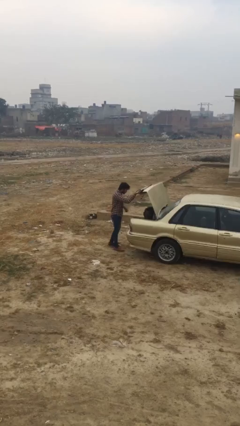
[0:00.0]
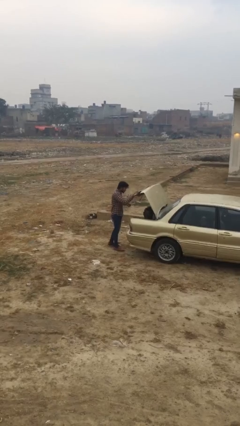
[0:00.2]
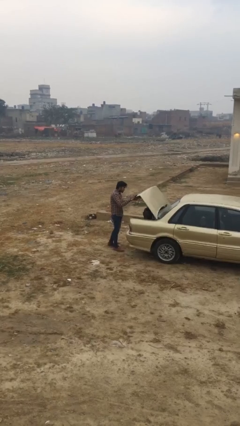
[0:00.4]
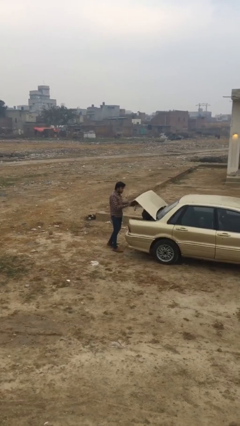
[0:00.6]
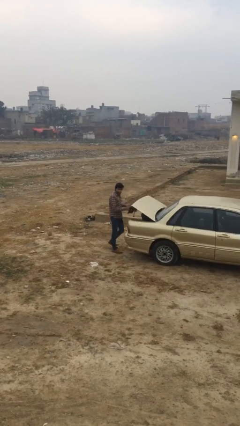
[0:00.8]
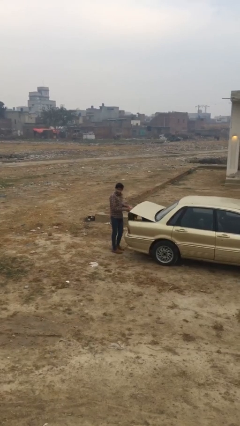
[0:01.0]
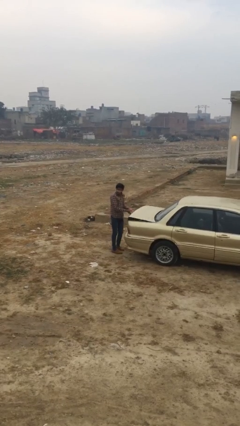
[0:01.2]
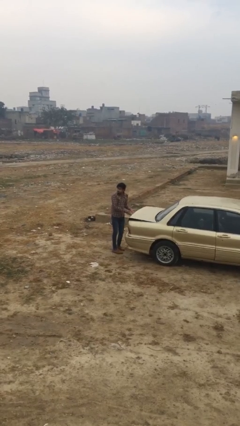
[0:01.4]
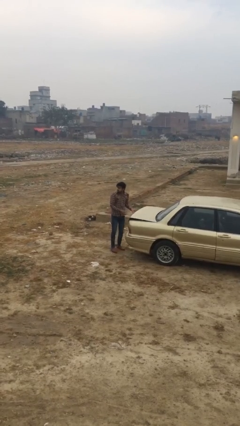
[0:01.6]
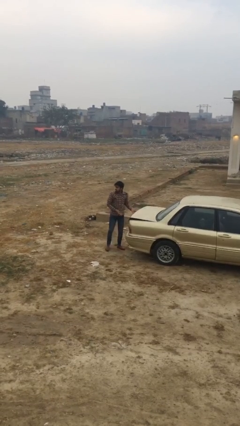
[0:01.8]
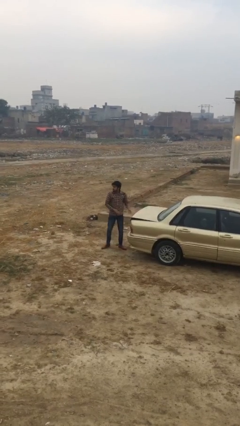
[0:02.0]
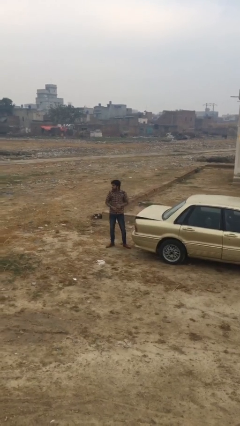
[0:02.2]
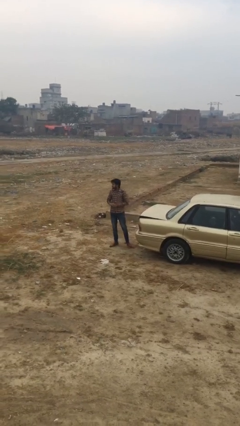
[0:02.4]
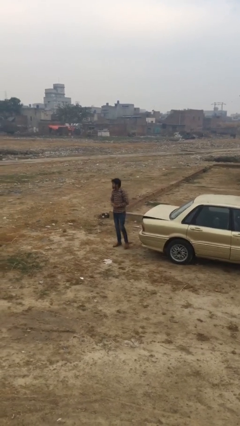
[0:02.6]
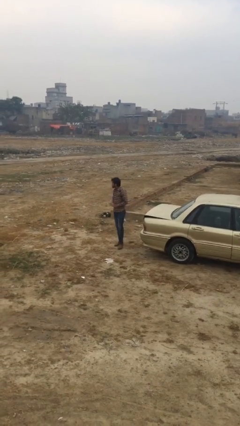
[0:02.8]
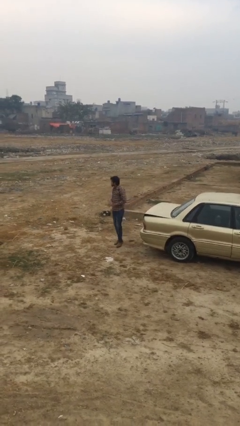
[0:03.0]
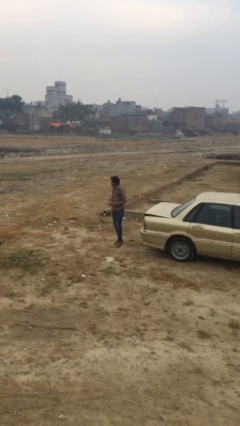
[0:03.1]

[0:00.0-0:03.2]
person closes car trunk

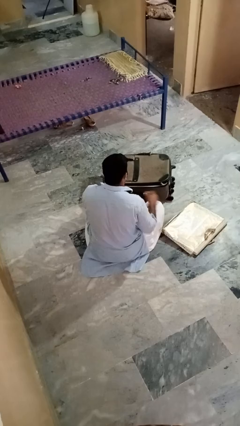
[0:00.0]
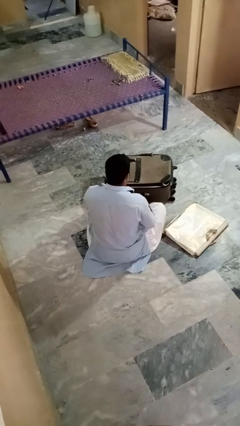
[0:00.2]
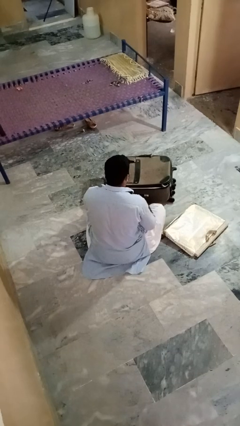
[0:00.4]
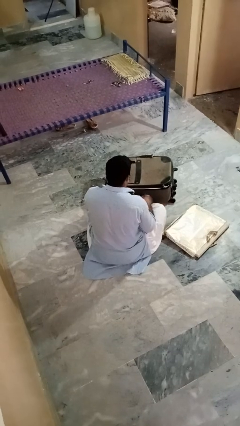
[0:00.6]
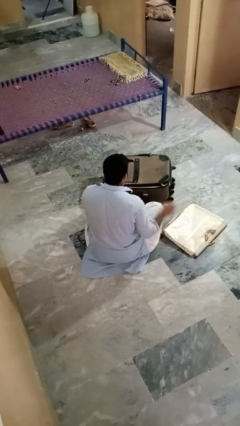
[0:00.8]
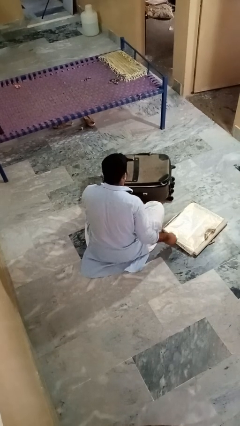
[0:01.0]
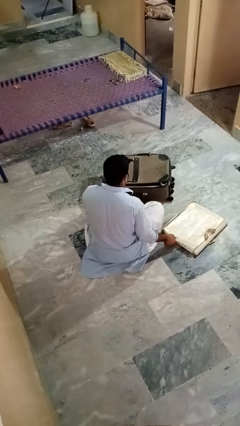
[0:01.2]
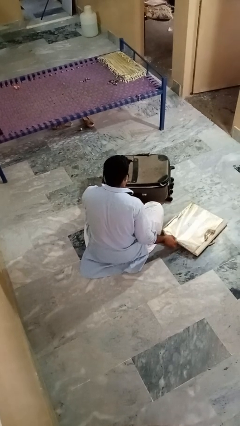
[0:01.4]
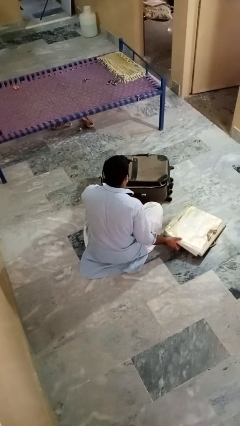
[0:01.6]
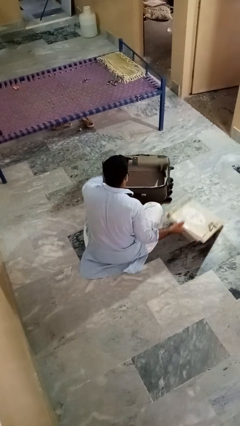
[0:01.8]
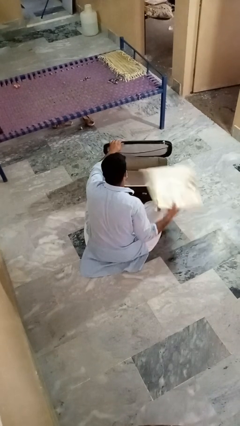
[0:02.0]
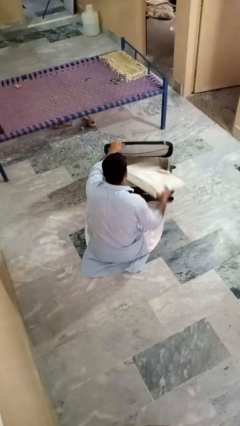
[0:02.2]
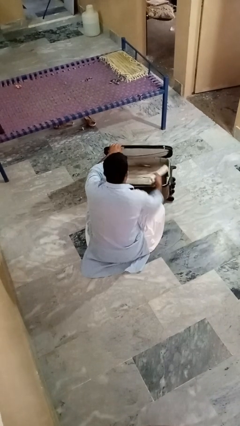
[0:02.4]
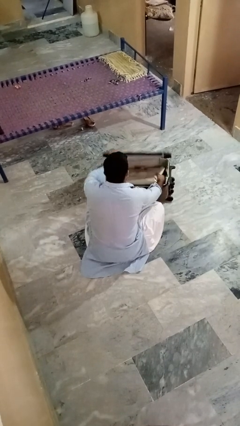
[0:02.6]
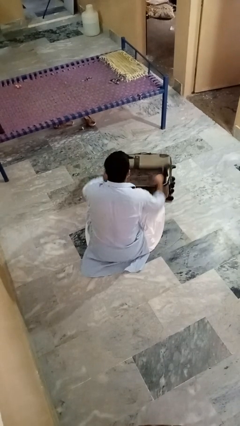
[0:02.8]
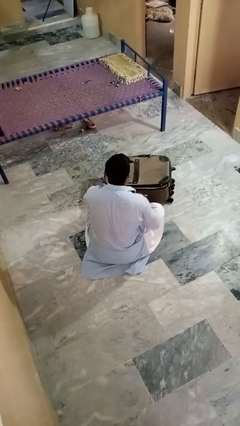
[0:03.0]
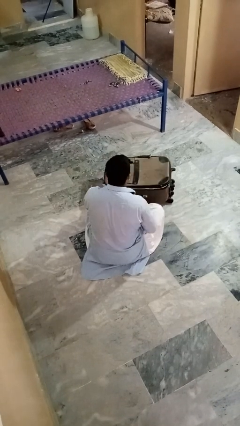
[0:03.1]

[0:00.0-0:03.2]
person puts object into bag

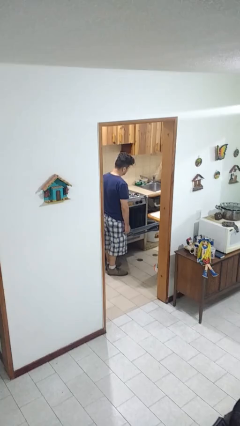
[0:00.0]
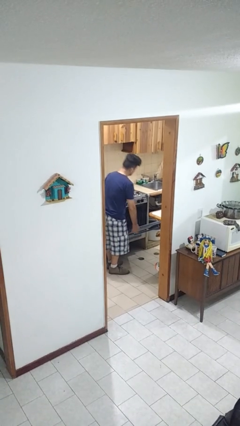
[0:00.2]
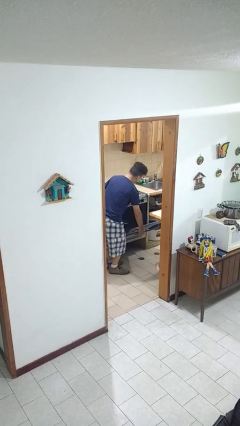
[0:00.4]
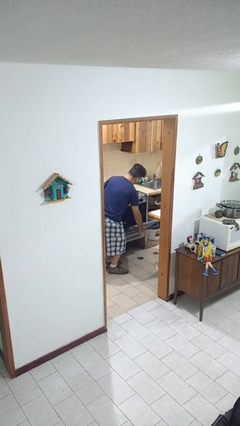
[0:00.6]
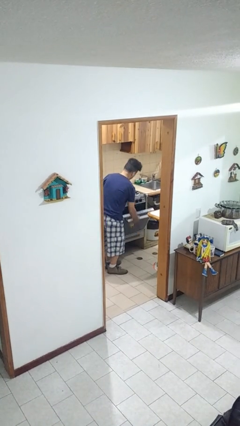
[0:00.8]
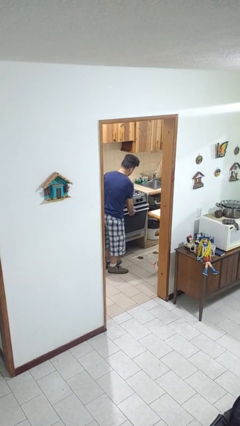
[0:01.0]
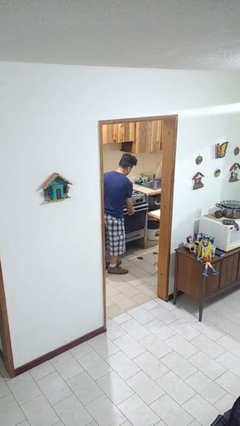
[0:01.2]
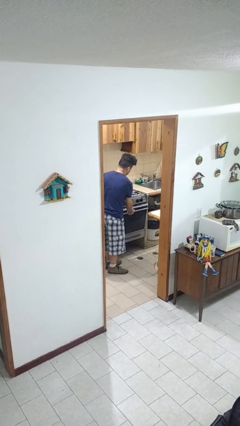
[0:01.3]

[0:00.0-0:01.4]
person closes oven door

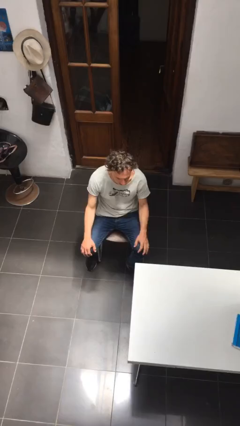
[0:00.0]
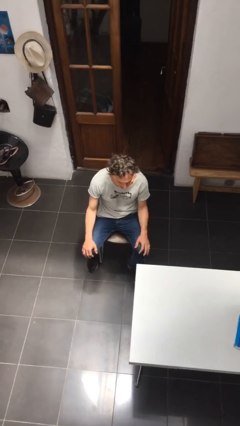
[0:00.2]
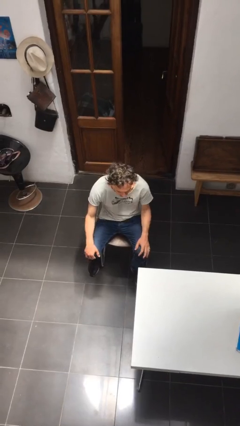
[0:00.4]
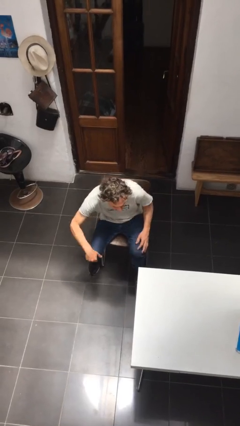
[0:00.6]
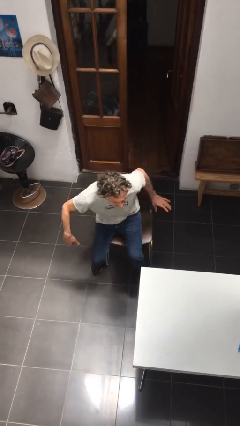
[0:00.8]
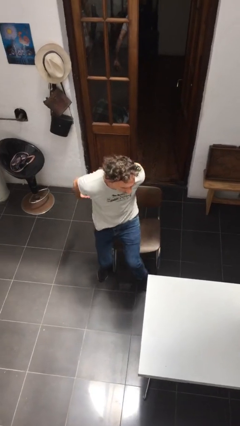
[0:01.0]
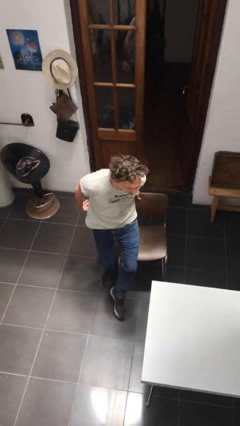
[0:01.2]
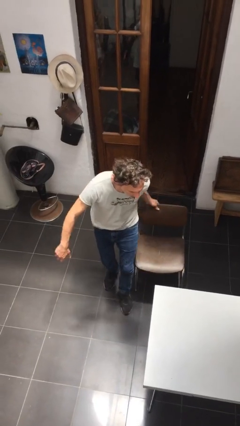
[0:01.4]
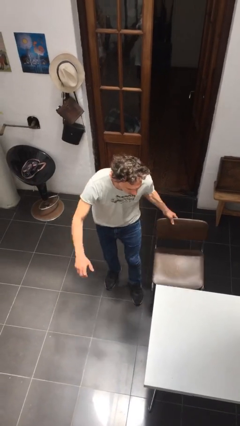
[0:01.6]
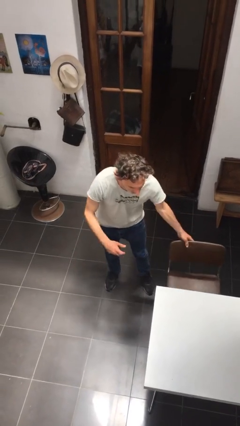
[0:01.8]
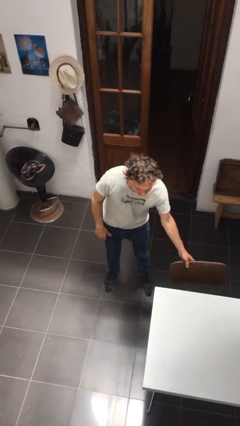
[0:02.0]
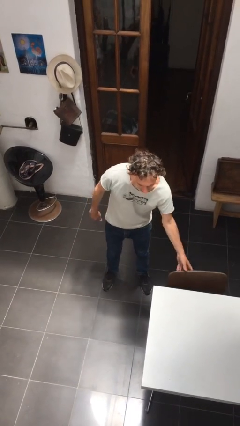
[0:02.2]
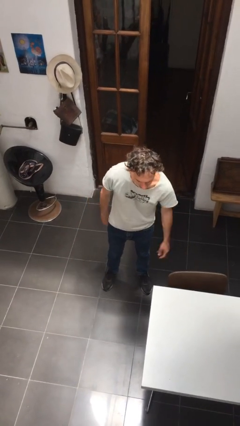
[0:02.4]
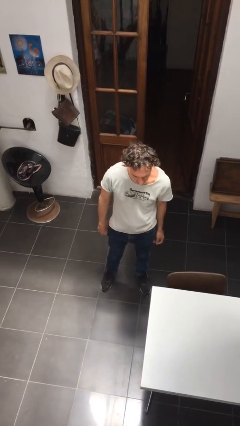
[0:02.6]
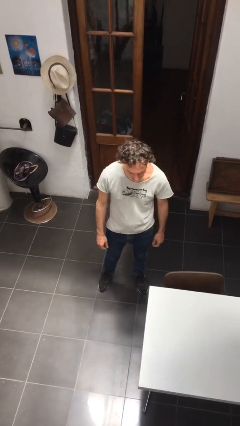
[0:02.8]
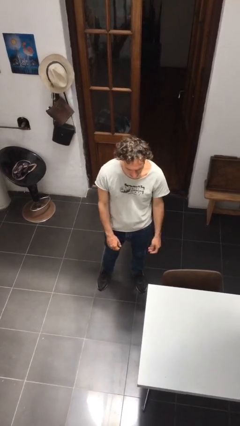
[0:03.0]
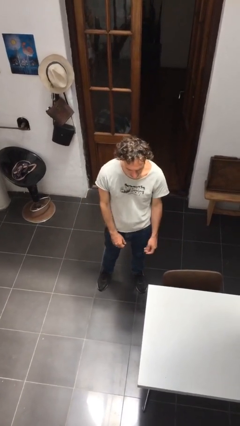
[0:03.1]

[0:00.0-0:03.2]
person stands up

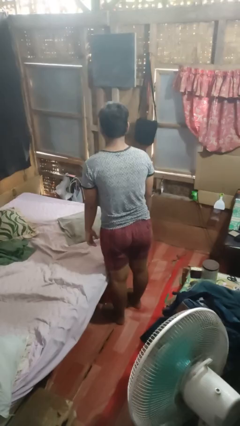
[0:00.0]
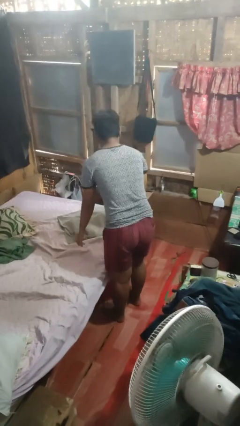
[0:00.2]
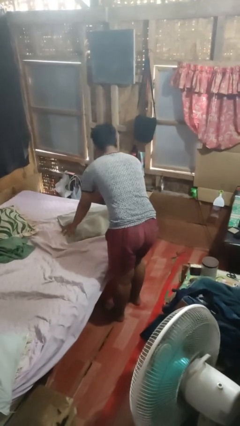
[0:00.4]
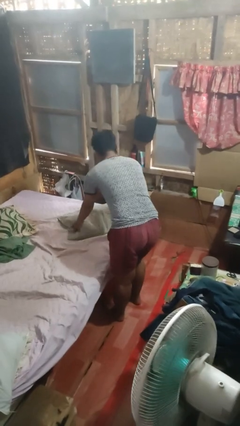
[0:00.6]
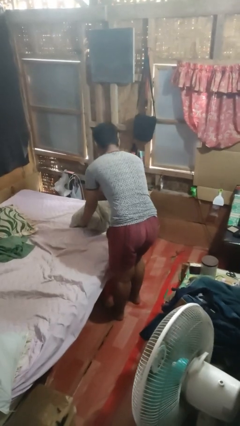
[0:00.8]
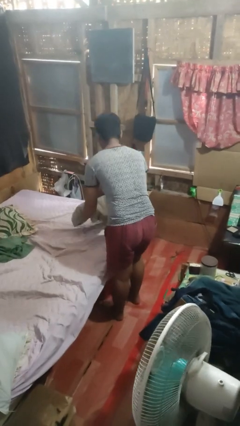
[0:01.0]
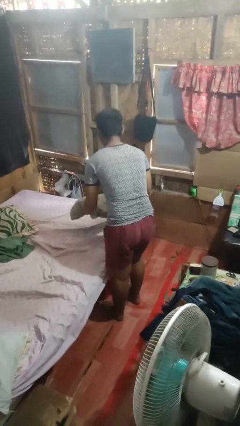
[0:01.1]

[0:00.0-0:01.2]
person picks up object from bed

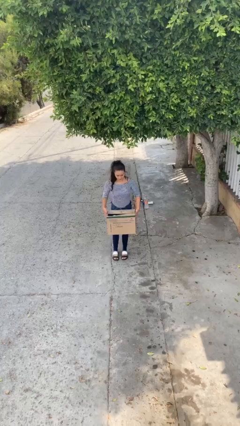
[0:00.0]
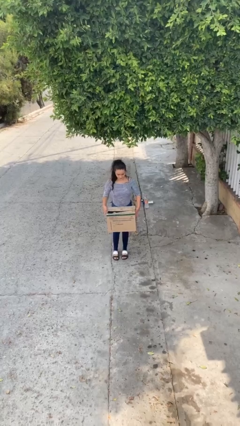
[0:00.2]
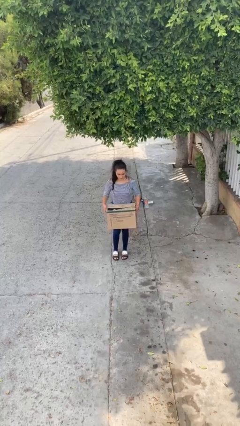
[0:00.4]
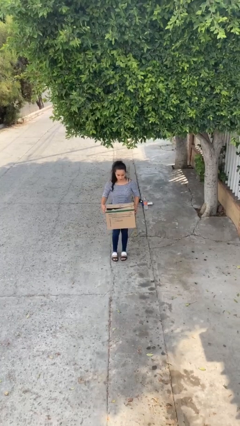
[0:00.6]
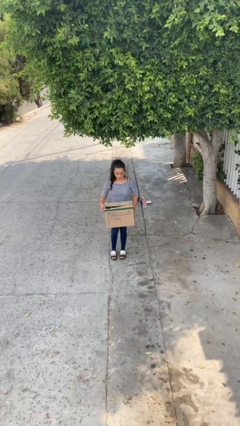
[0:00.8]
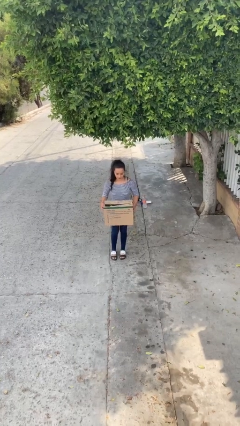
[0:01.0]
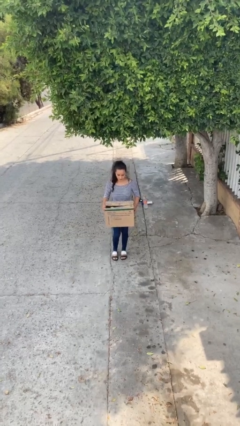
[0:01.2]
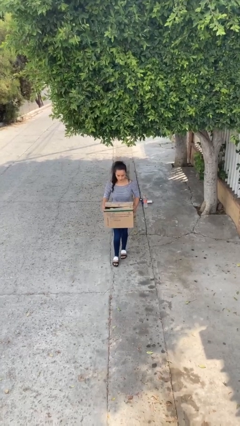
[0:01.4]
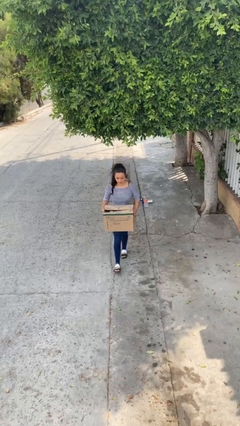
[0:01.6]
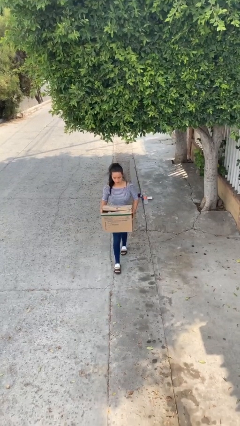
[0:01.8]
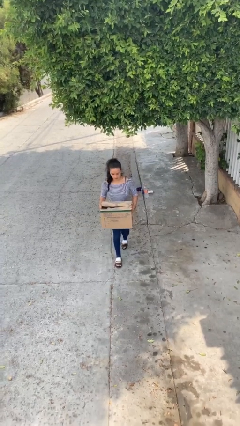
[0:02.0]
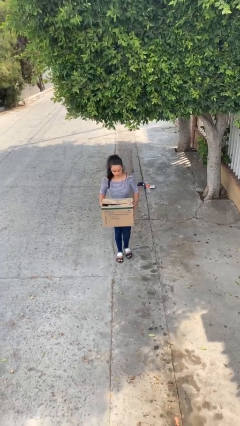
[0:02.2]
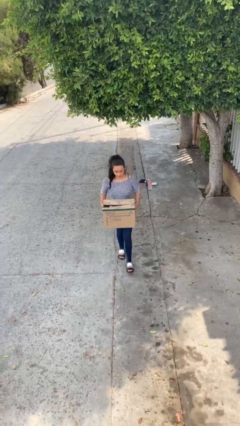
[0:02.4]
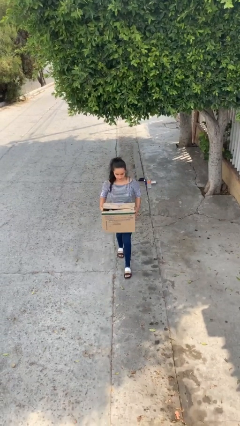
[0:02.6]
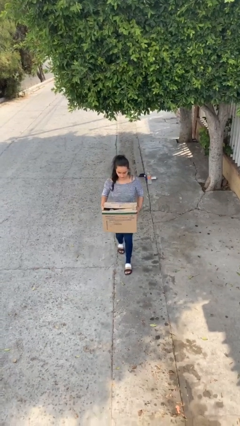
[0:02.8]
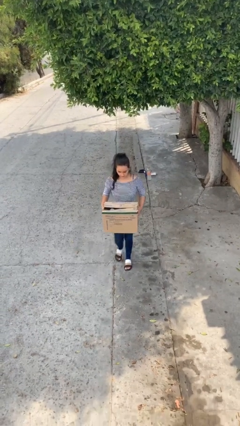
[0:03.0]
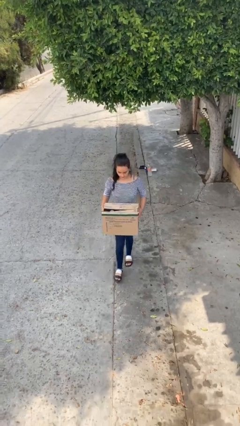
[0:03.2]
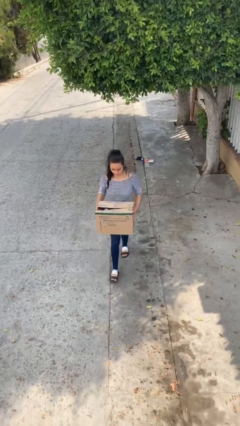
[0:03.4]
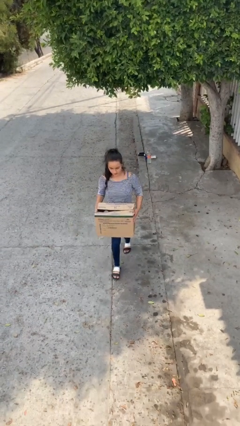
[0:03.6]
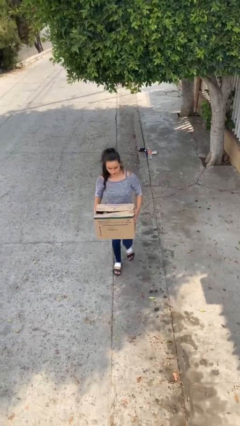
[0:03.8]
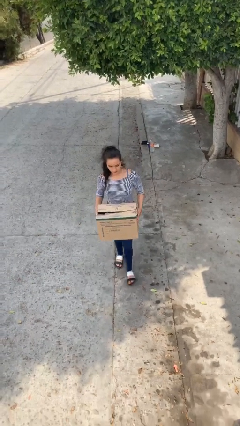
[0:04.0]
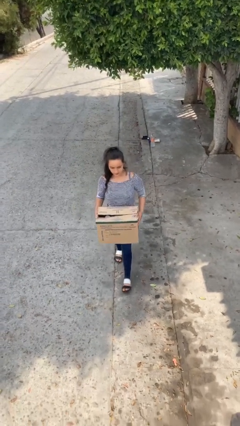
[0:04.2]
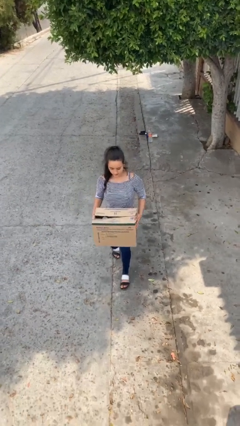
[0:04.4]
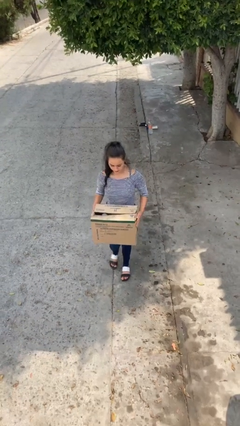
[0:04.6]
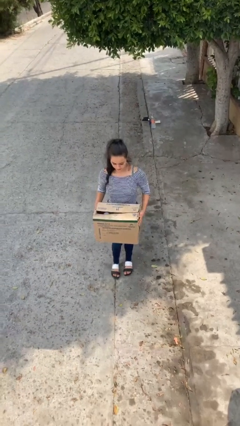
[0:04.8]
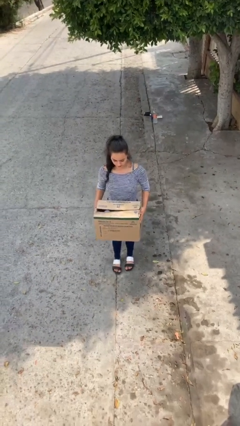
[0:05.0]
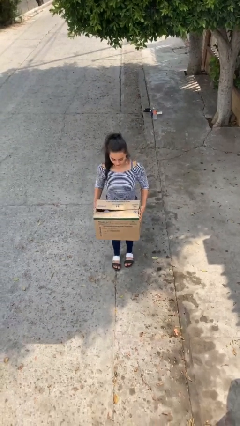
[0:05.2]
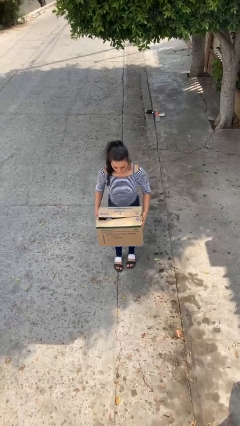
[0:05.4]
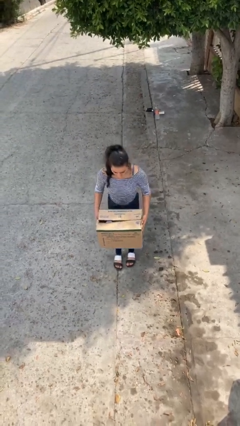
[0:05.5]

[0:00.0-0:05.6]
person carries heavy object
